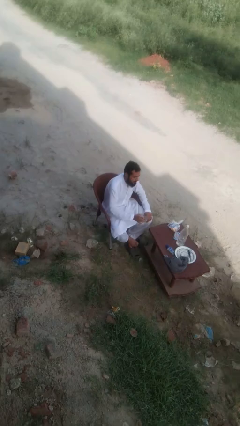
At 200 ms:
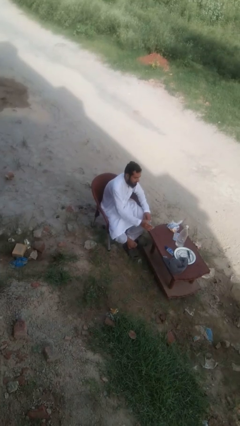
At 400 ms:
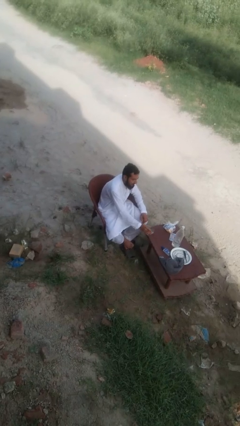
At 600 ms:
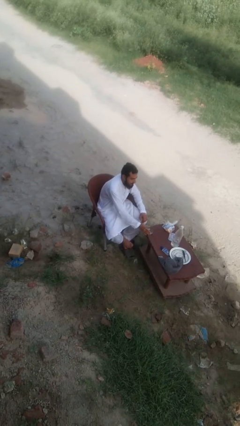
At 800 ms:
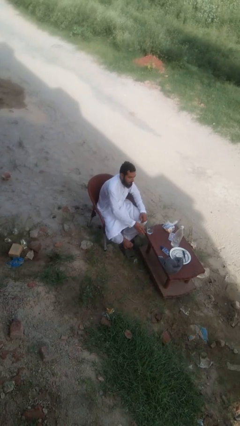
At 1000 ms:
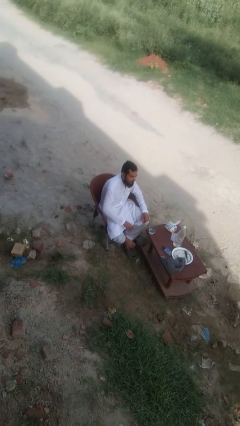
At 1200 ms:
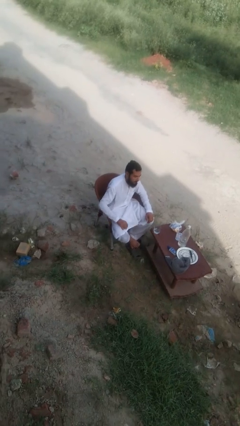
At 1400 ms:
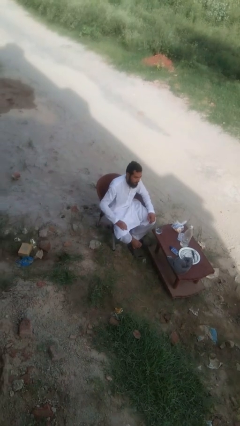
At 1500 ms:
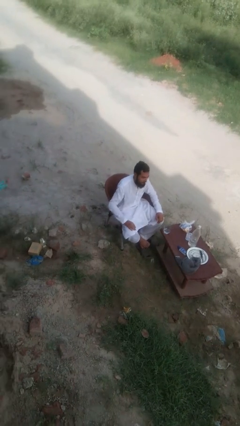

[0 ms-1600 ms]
person puts down object on table

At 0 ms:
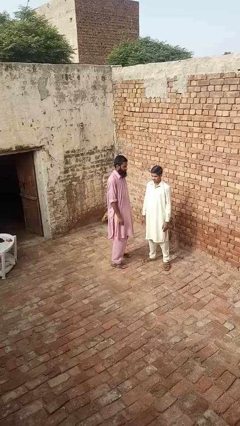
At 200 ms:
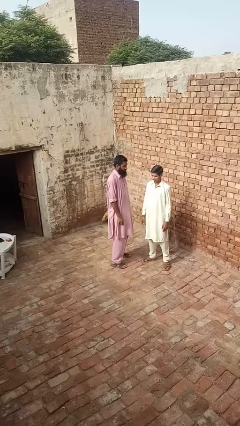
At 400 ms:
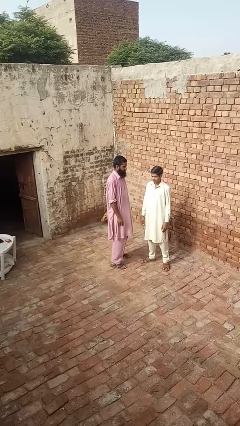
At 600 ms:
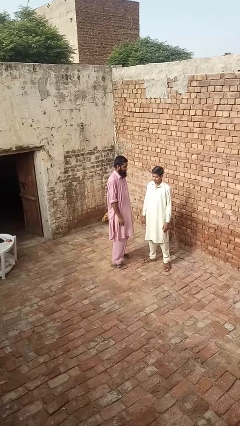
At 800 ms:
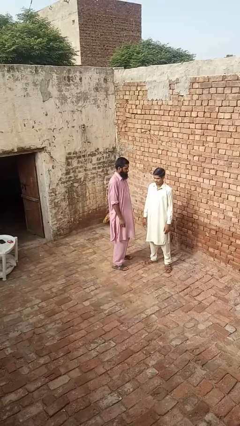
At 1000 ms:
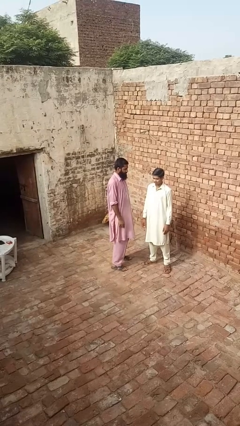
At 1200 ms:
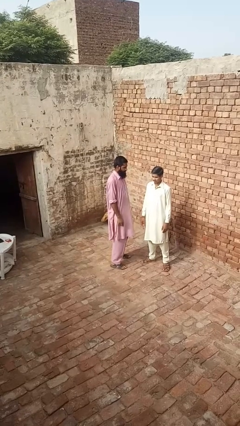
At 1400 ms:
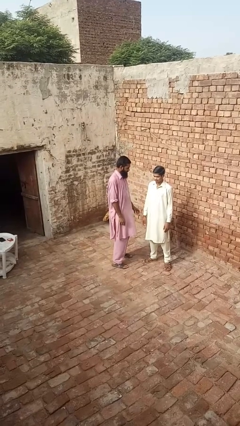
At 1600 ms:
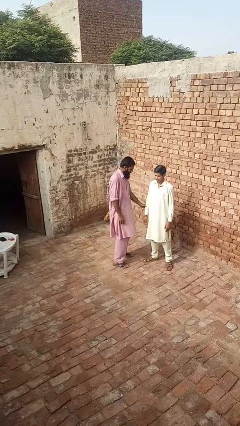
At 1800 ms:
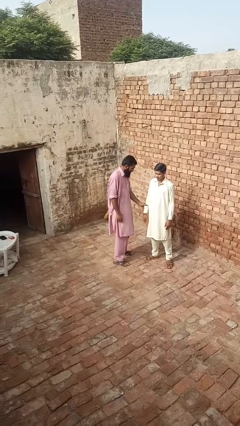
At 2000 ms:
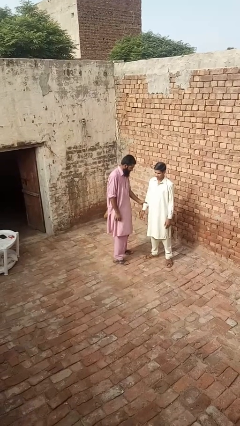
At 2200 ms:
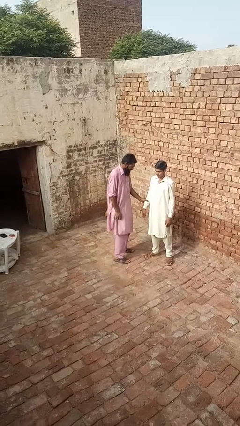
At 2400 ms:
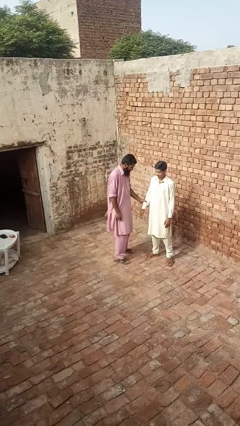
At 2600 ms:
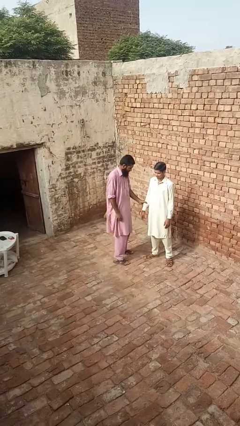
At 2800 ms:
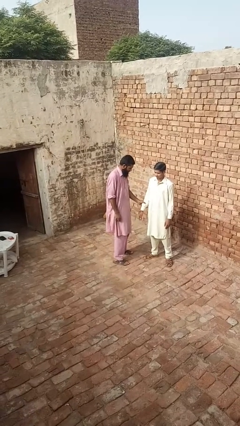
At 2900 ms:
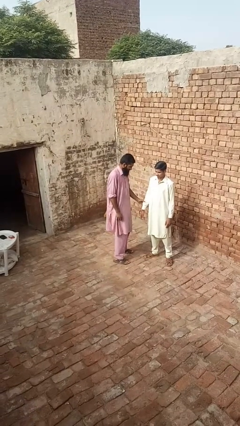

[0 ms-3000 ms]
person grabs person by forearm

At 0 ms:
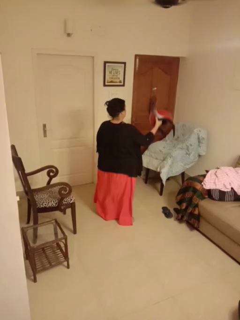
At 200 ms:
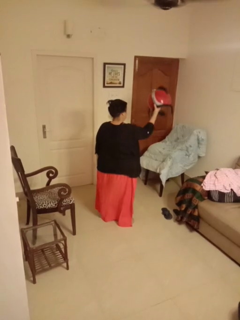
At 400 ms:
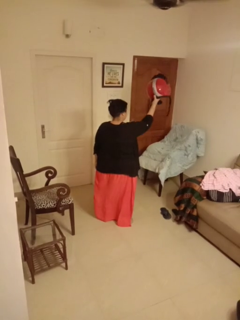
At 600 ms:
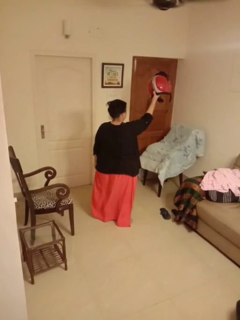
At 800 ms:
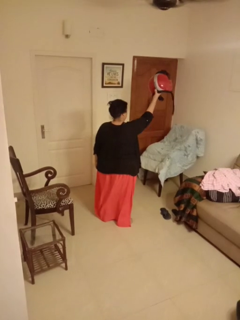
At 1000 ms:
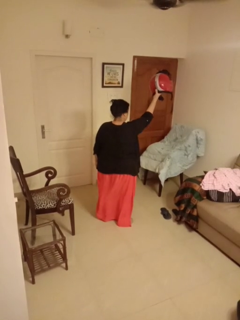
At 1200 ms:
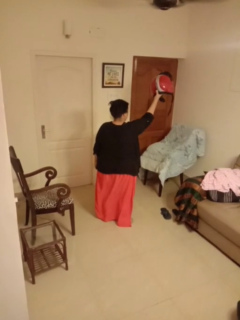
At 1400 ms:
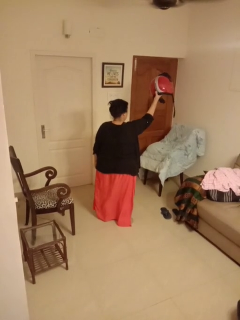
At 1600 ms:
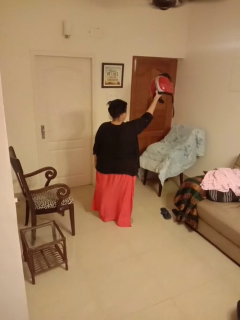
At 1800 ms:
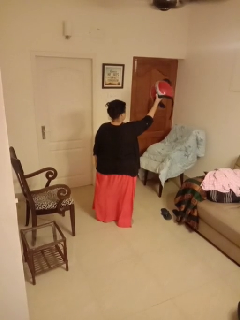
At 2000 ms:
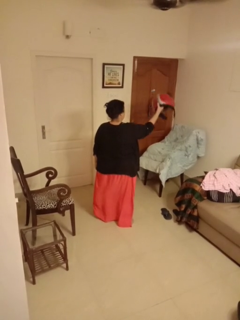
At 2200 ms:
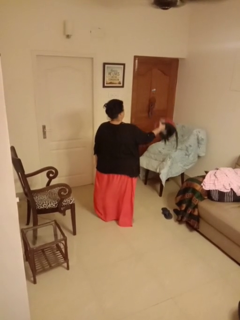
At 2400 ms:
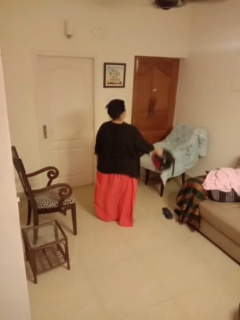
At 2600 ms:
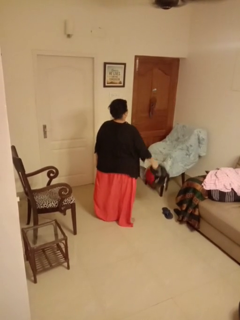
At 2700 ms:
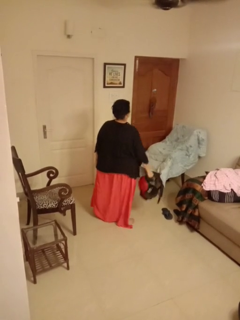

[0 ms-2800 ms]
person holds object above head

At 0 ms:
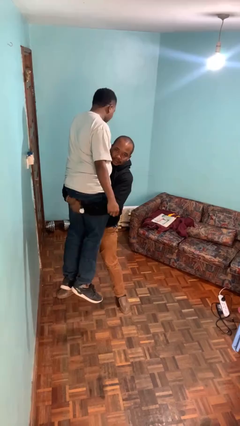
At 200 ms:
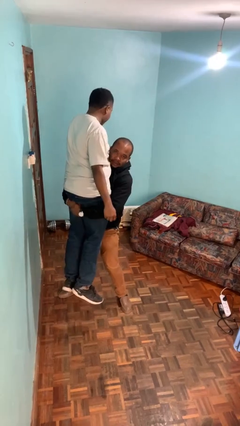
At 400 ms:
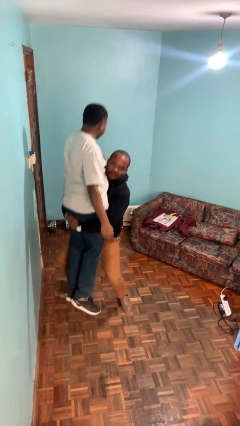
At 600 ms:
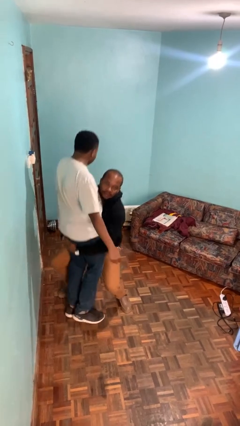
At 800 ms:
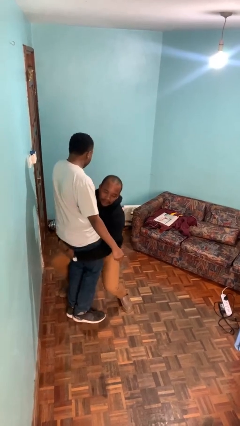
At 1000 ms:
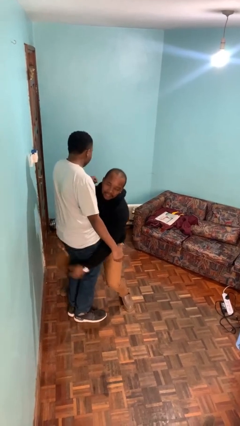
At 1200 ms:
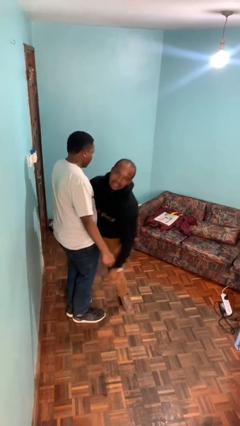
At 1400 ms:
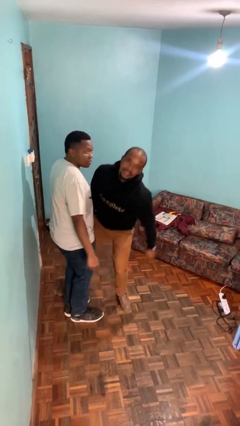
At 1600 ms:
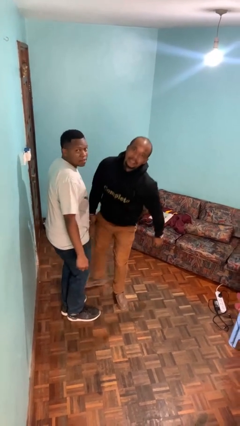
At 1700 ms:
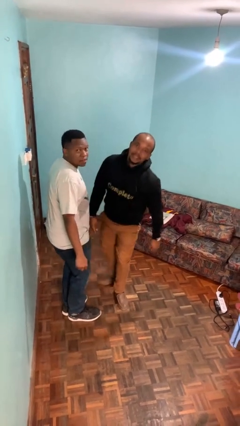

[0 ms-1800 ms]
person puts down person

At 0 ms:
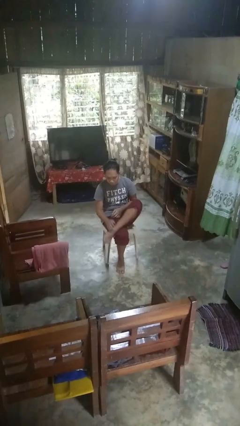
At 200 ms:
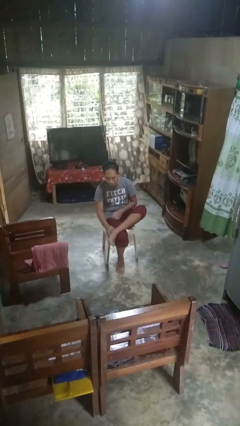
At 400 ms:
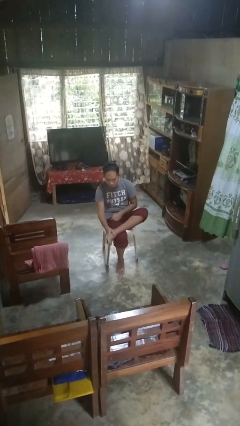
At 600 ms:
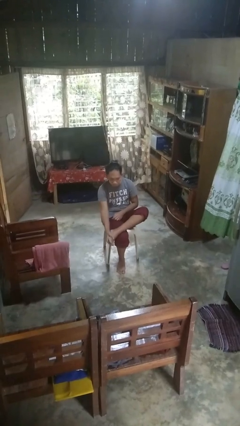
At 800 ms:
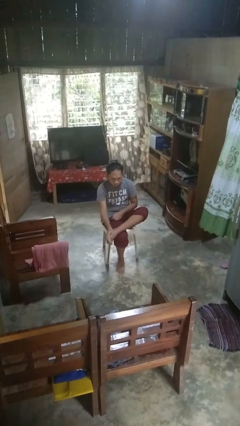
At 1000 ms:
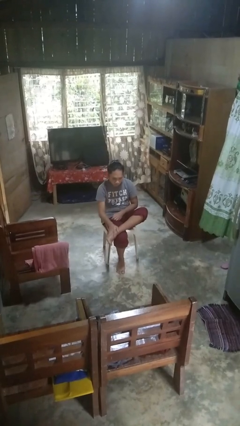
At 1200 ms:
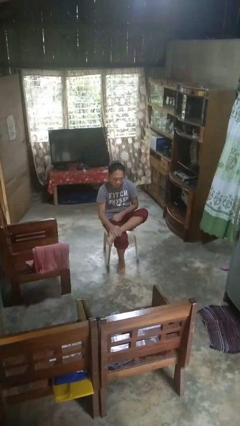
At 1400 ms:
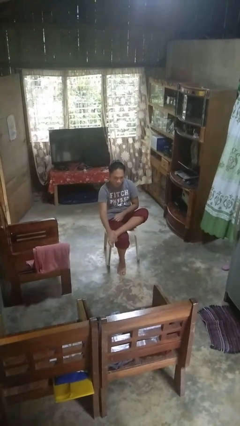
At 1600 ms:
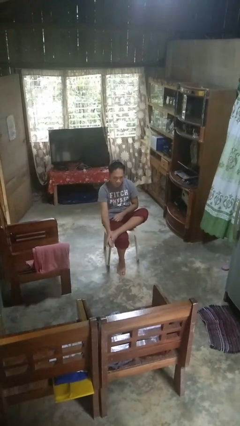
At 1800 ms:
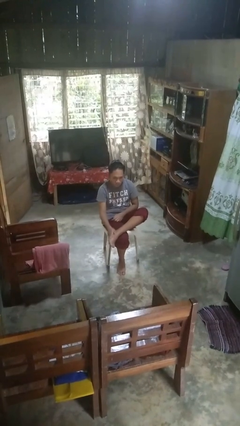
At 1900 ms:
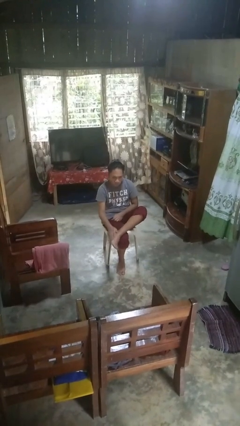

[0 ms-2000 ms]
person rubs foot

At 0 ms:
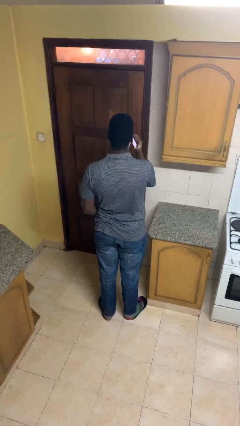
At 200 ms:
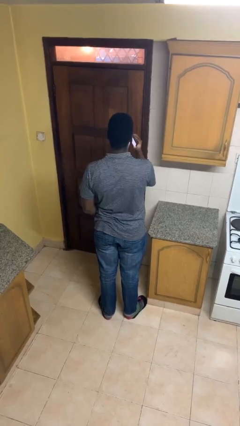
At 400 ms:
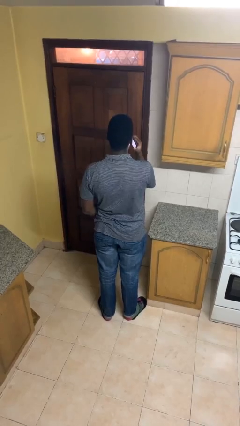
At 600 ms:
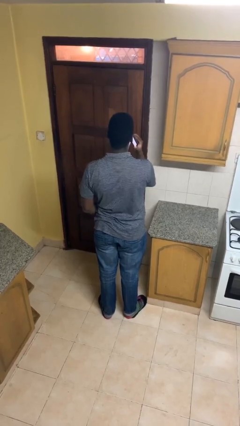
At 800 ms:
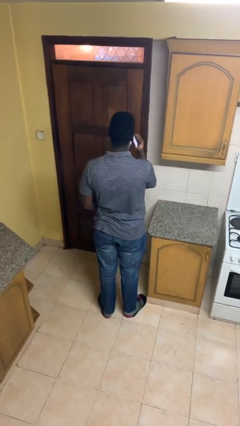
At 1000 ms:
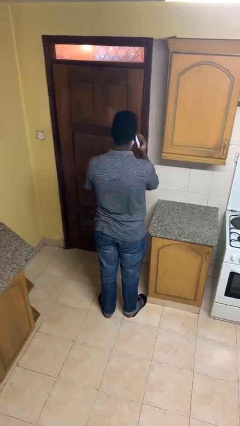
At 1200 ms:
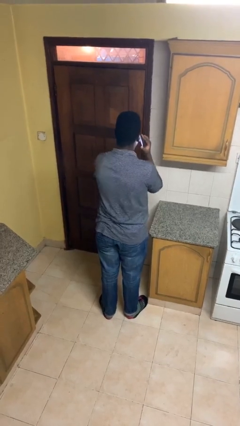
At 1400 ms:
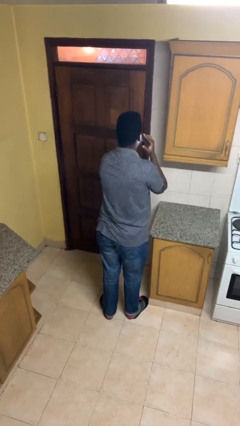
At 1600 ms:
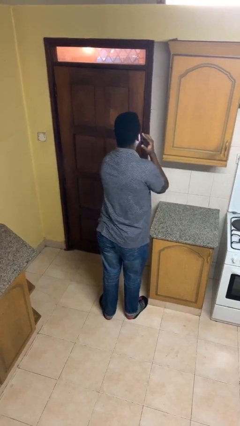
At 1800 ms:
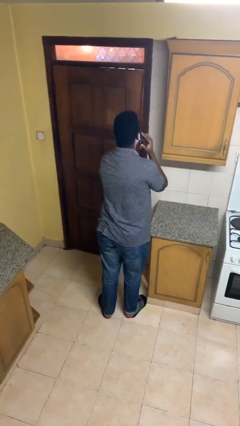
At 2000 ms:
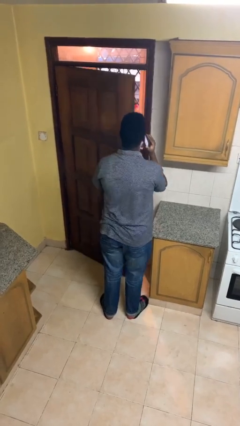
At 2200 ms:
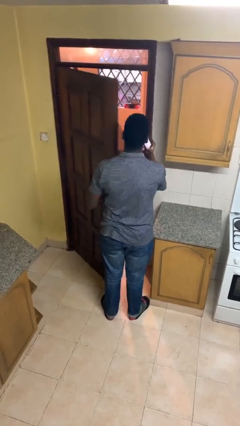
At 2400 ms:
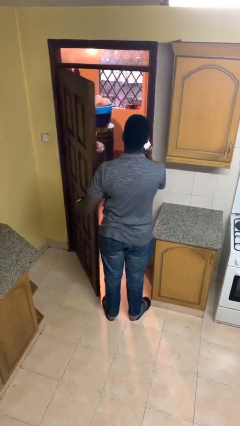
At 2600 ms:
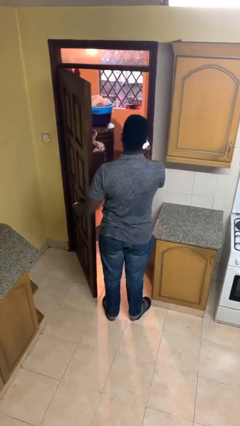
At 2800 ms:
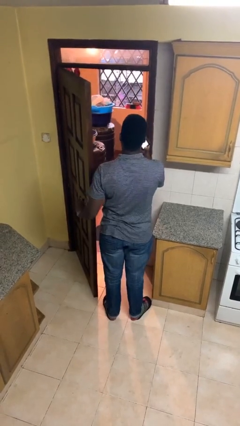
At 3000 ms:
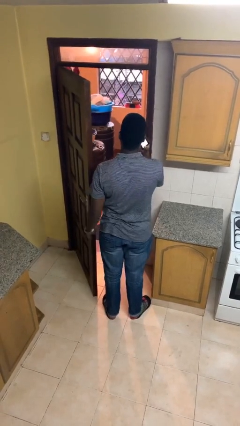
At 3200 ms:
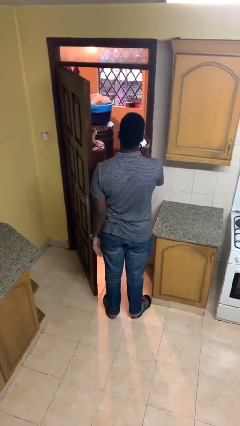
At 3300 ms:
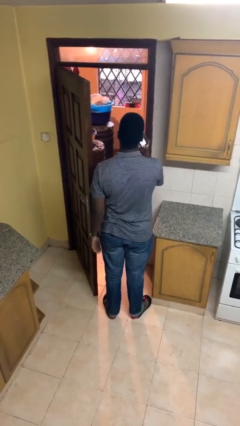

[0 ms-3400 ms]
person opens facility door

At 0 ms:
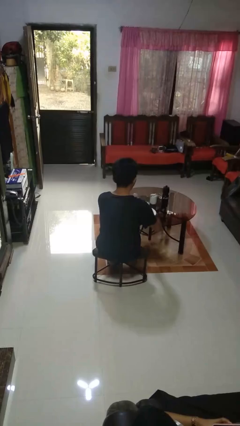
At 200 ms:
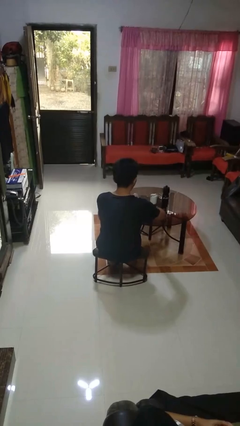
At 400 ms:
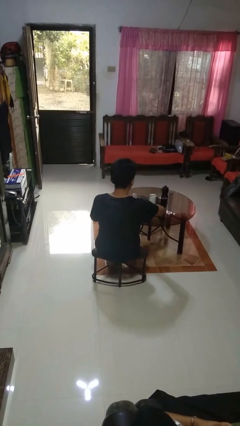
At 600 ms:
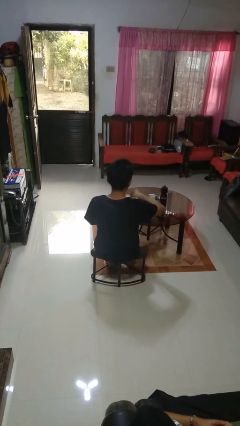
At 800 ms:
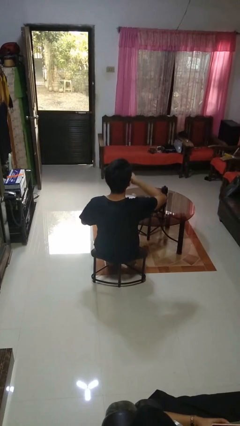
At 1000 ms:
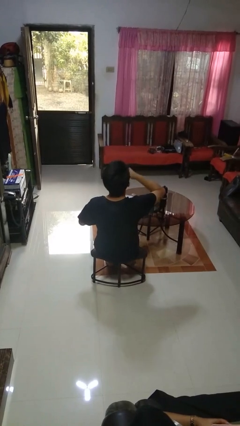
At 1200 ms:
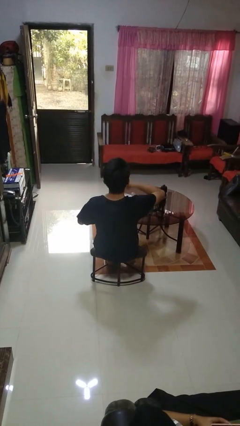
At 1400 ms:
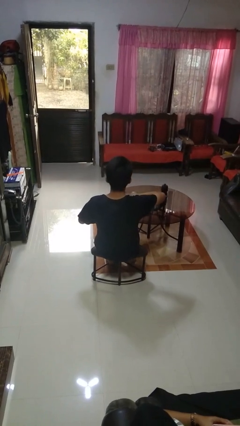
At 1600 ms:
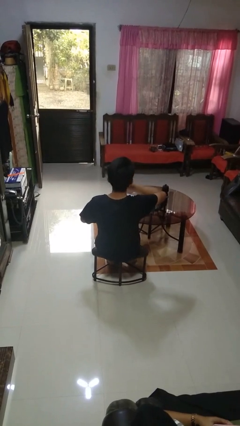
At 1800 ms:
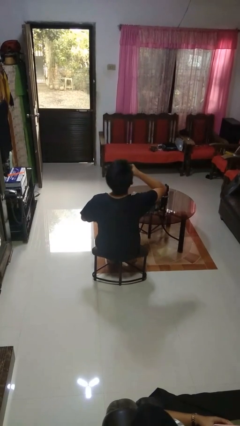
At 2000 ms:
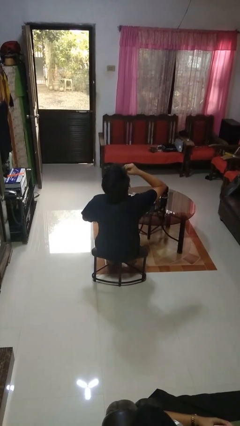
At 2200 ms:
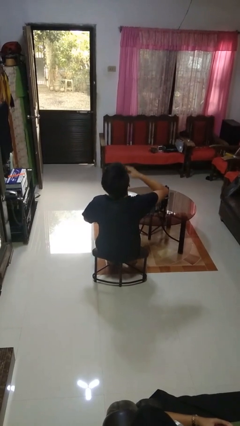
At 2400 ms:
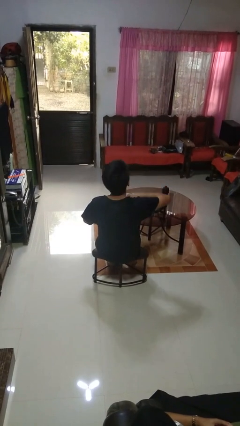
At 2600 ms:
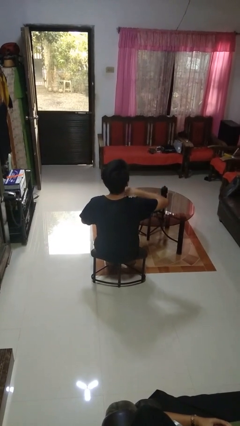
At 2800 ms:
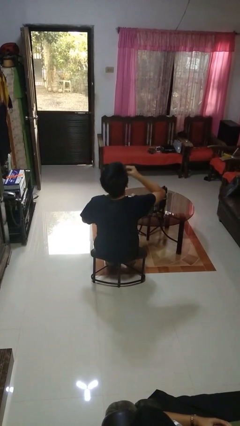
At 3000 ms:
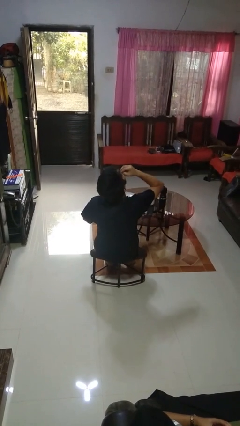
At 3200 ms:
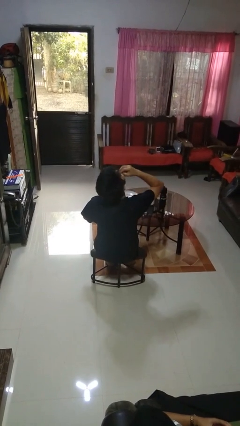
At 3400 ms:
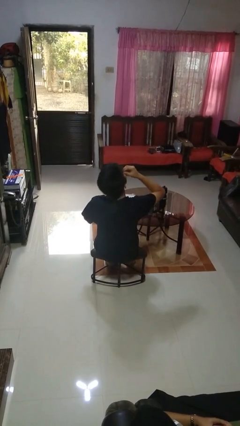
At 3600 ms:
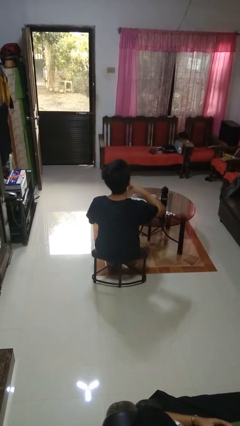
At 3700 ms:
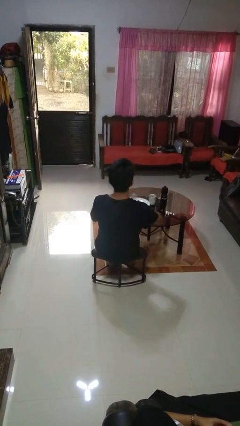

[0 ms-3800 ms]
person eats with hands
